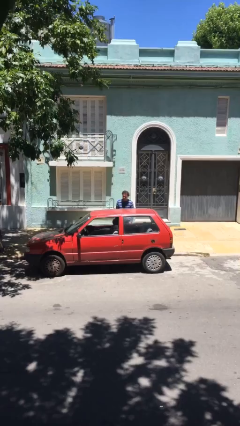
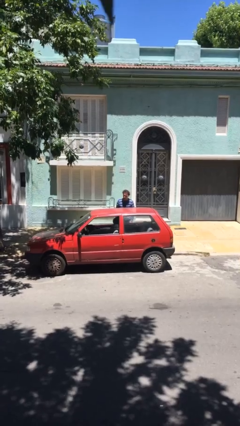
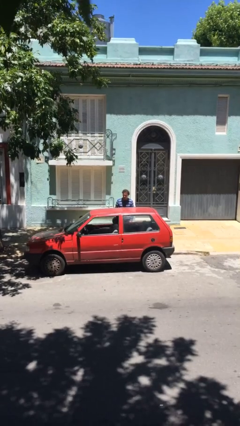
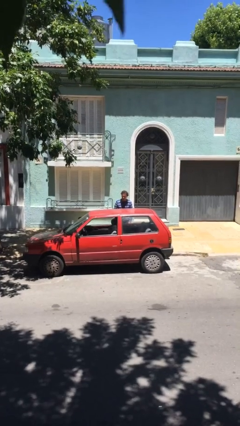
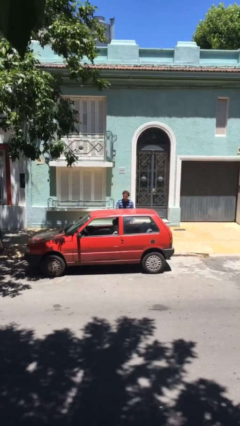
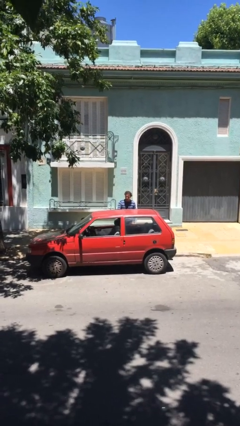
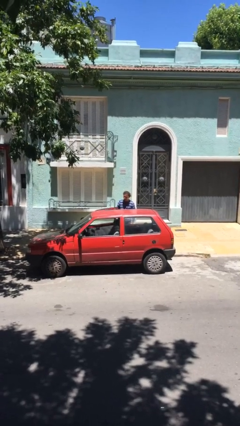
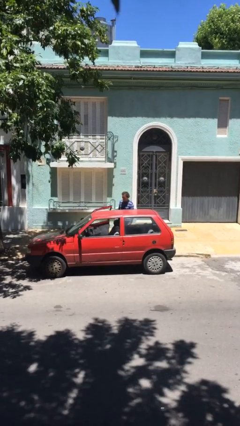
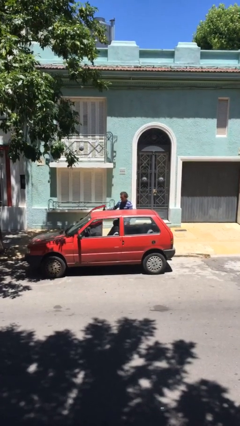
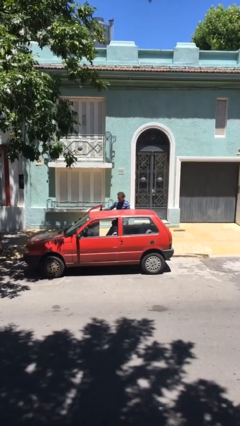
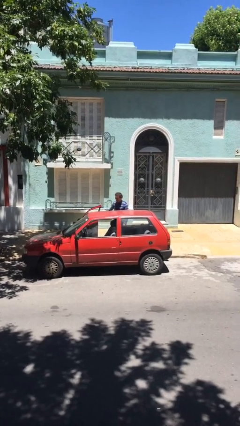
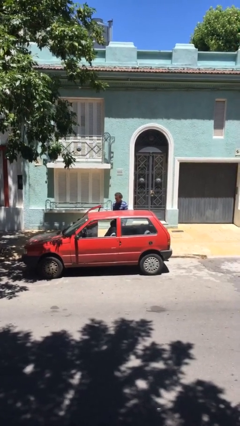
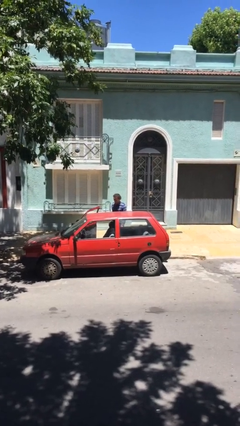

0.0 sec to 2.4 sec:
person opens car door

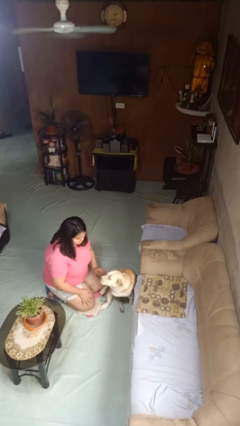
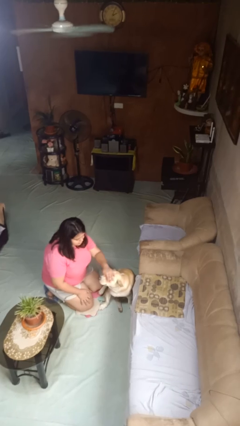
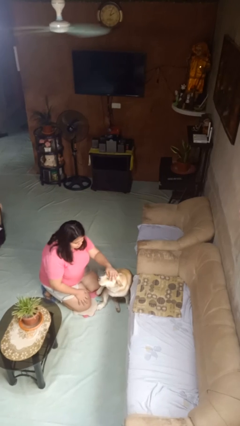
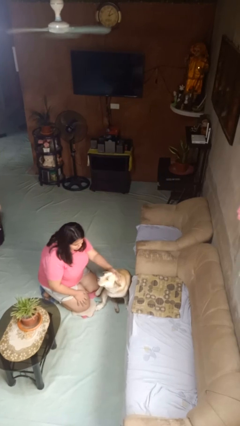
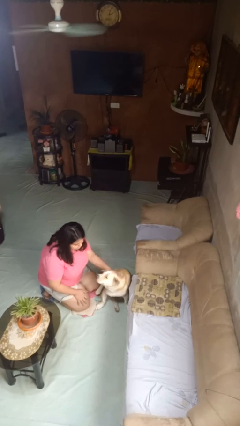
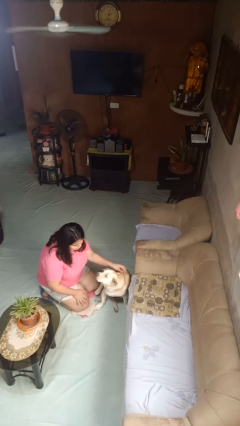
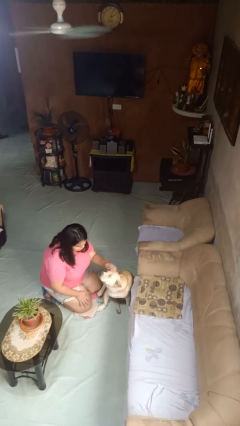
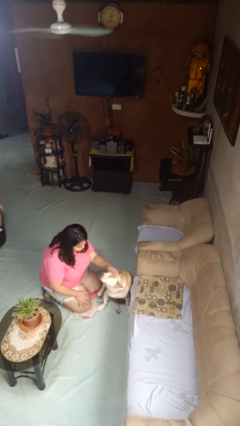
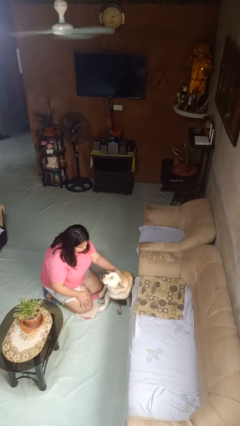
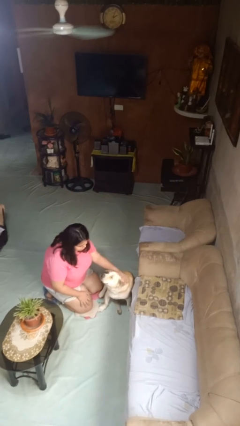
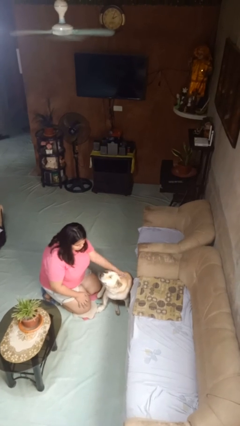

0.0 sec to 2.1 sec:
person pets dog

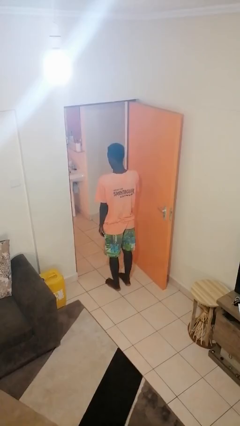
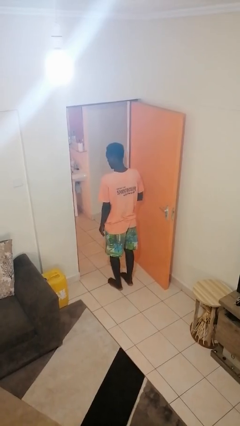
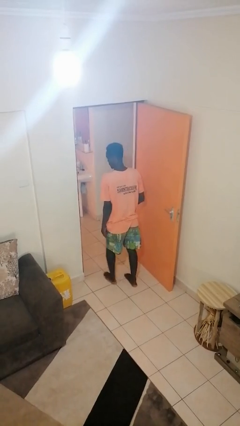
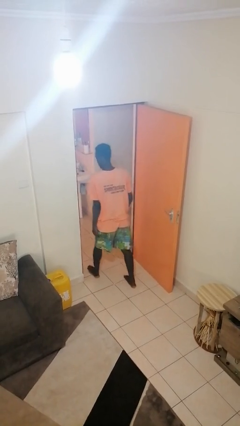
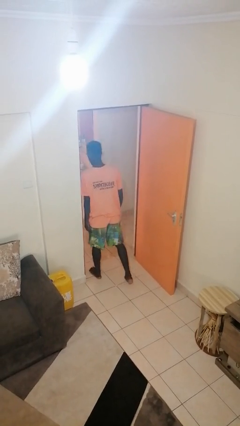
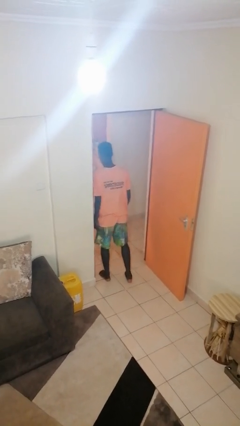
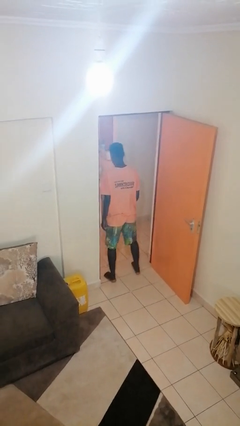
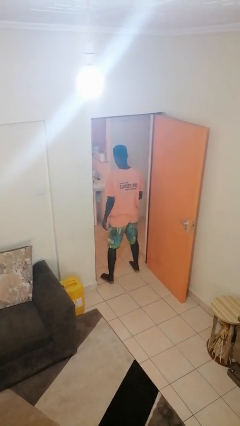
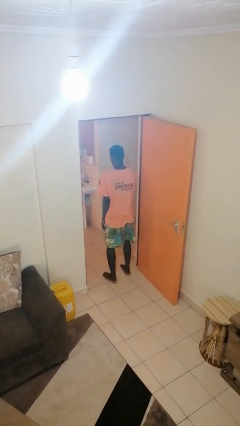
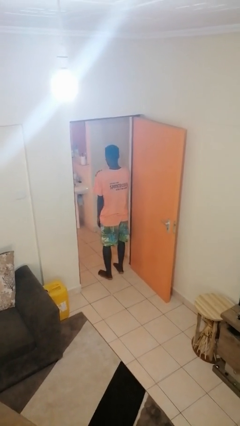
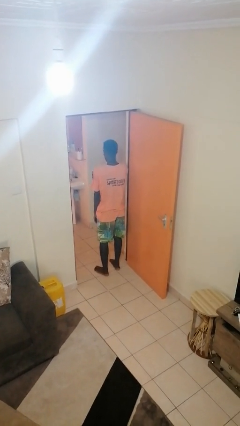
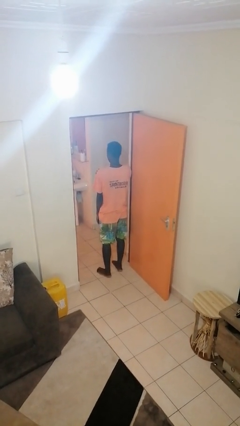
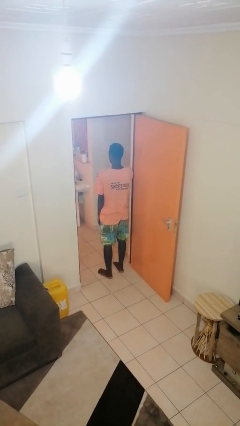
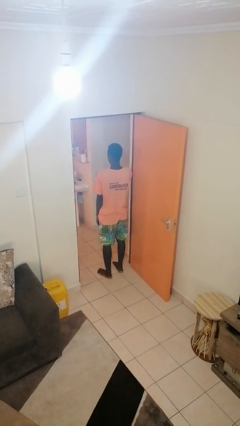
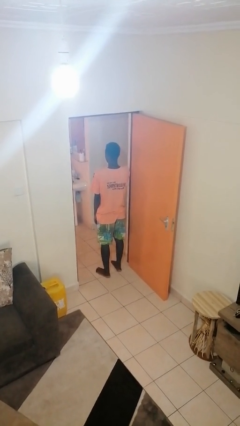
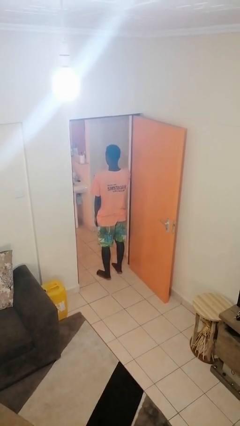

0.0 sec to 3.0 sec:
person bumps into wall

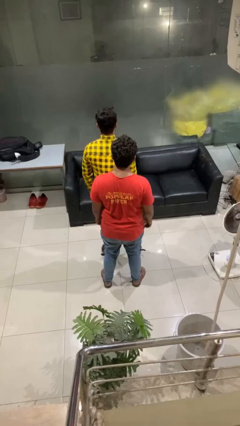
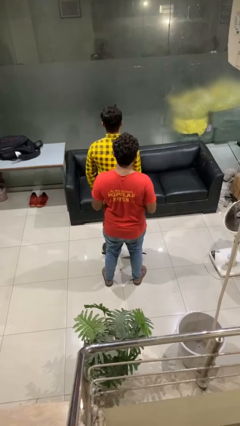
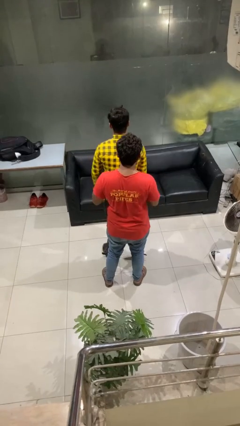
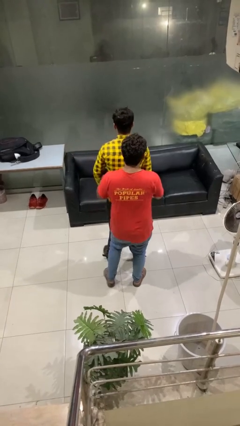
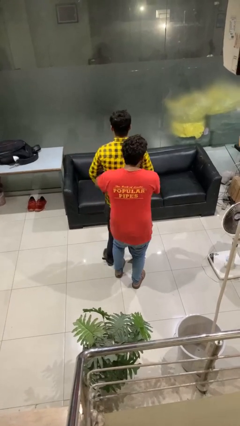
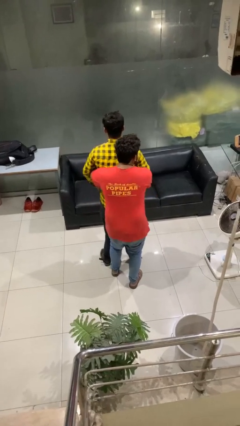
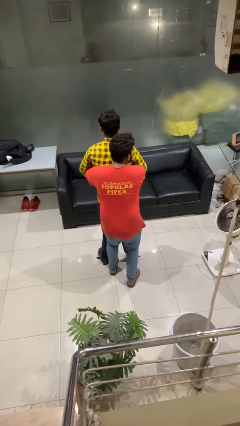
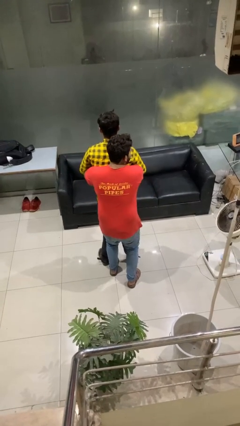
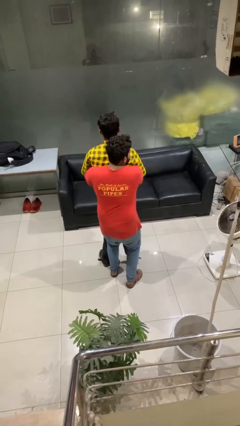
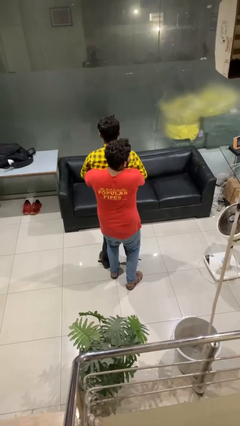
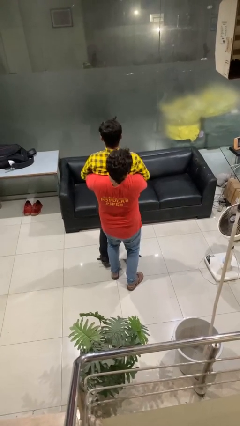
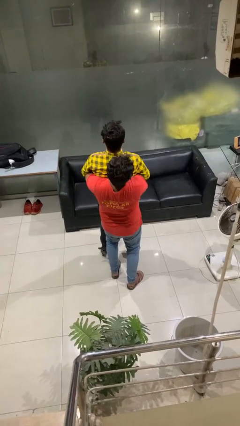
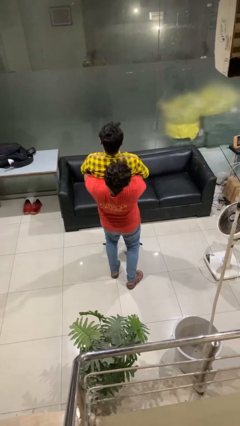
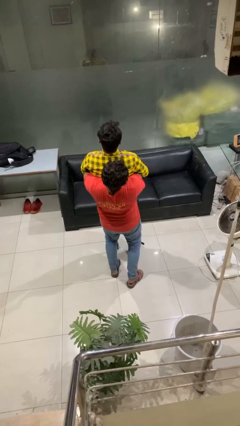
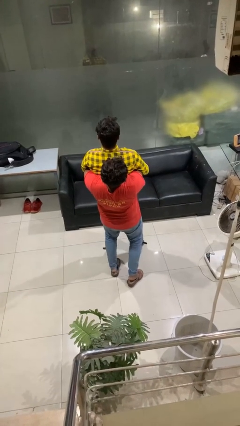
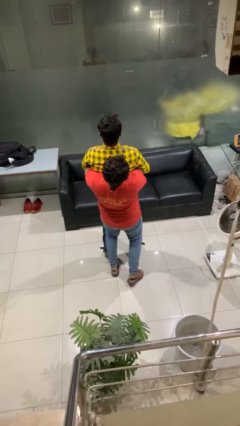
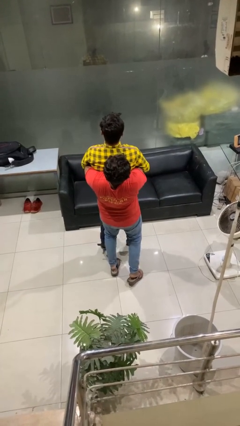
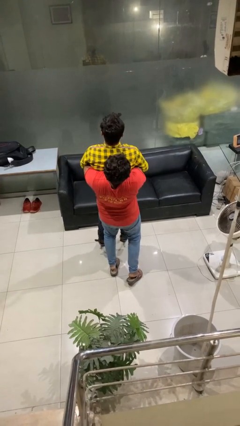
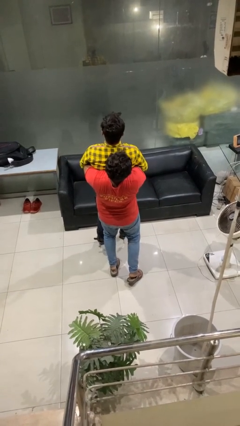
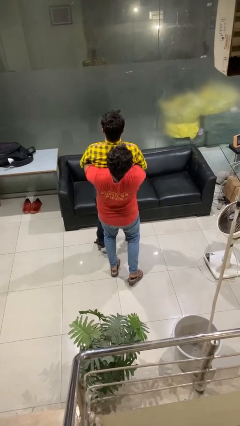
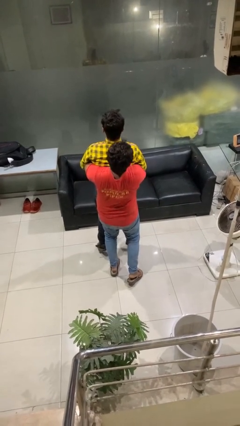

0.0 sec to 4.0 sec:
person picks up person

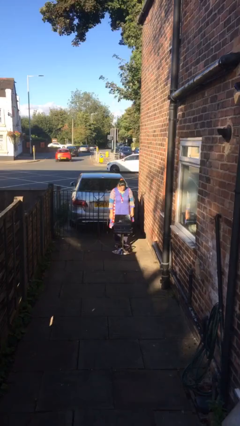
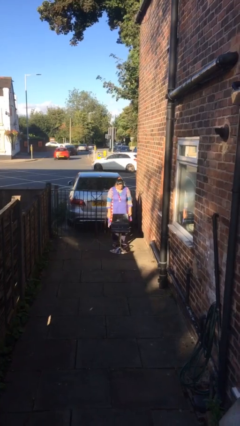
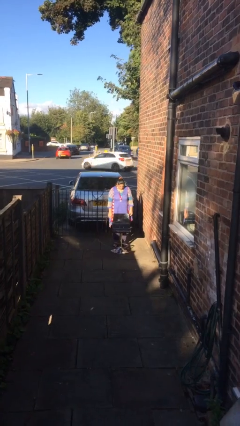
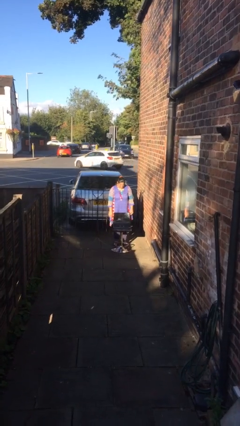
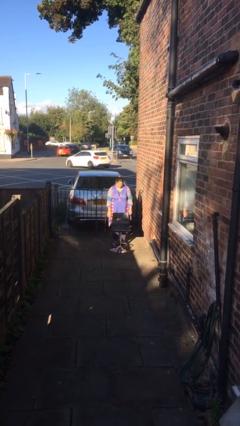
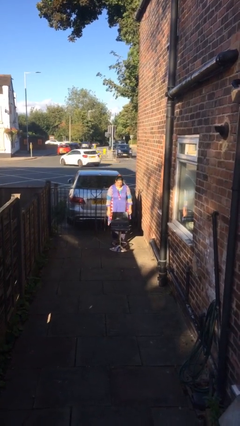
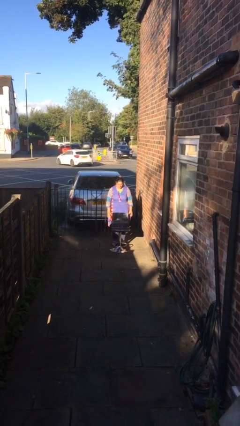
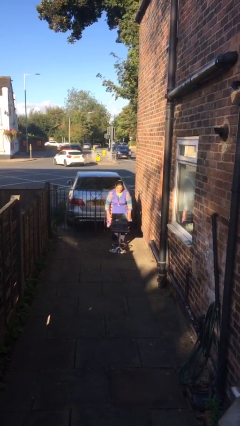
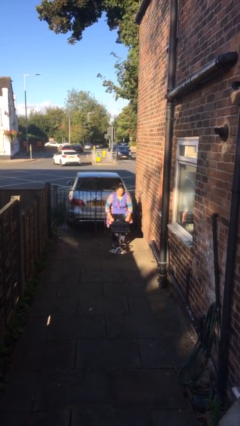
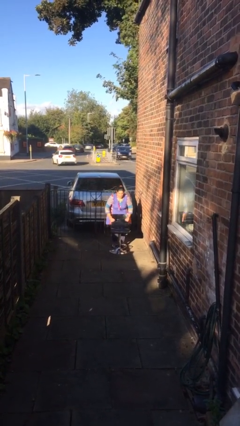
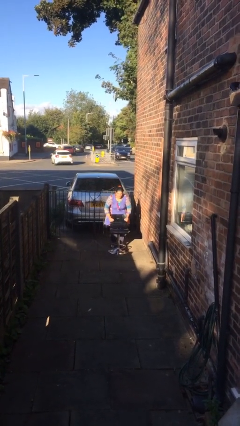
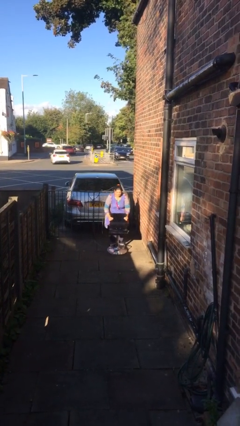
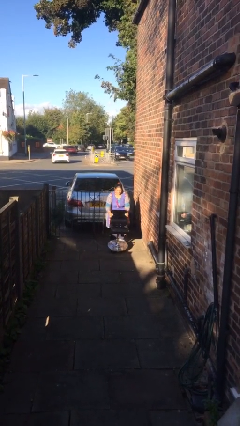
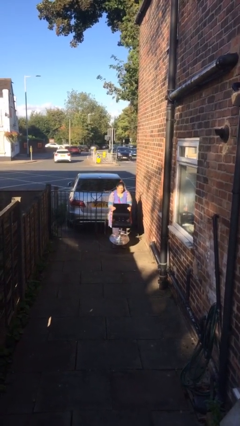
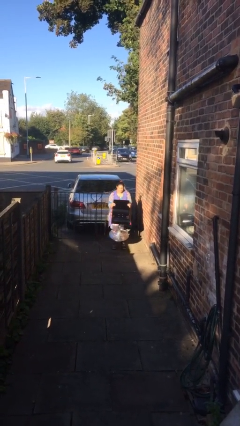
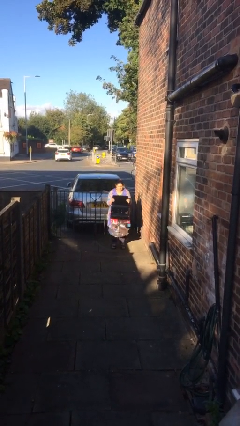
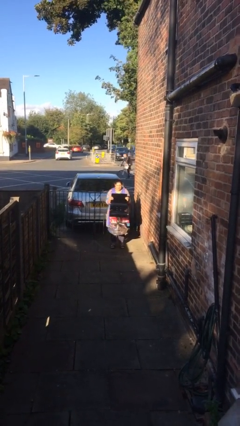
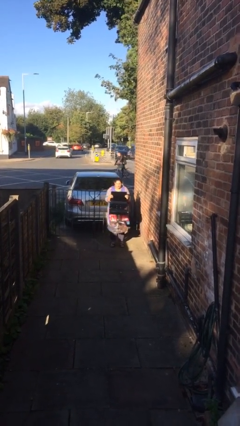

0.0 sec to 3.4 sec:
person picks up object from floor

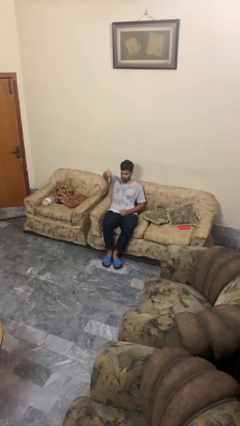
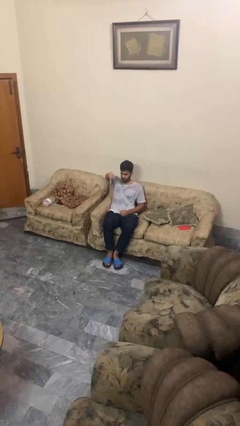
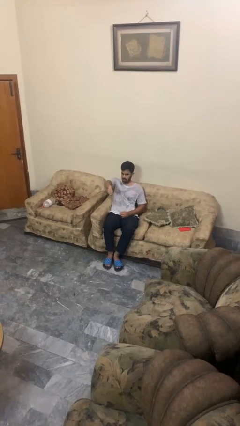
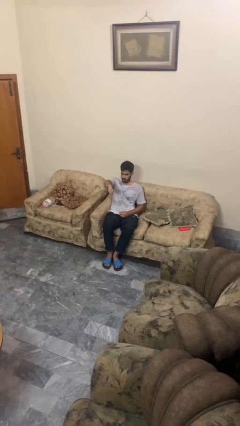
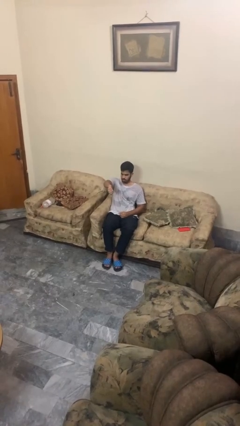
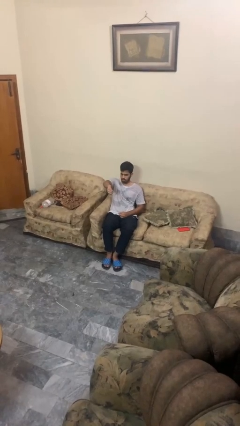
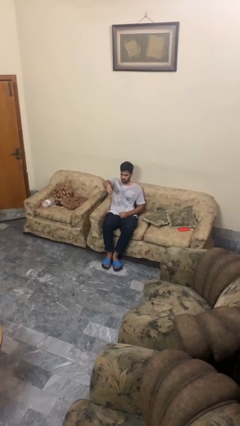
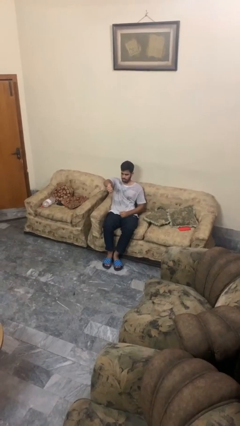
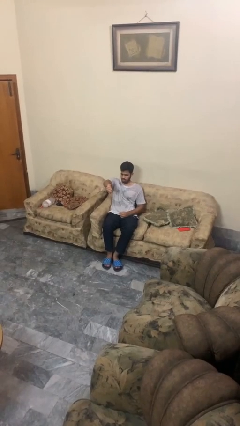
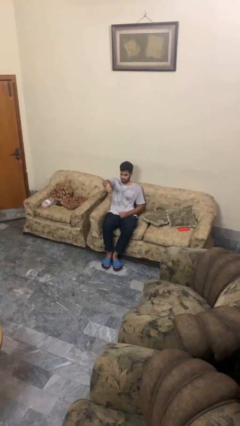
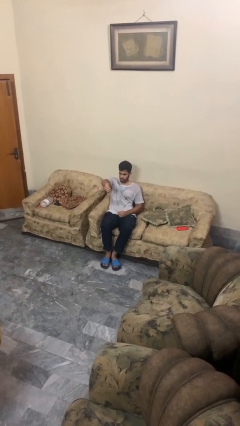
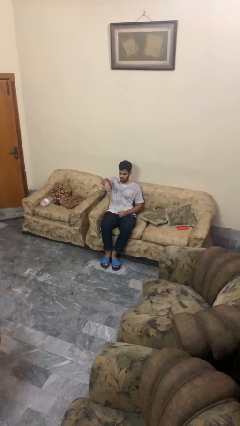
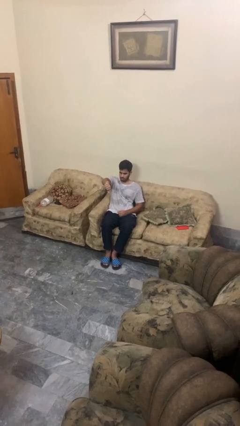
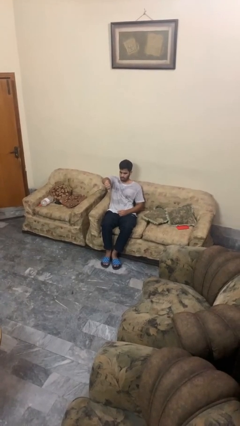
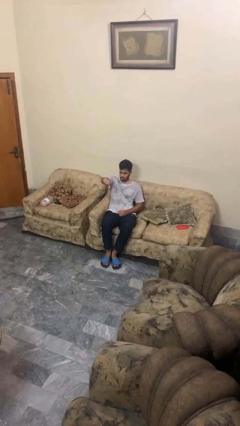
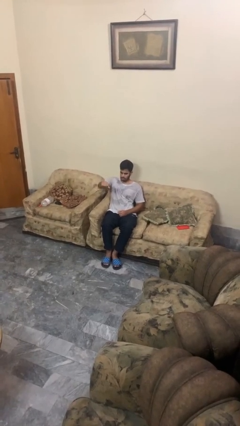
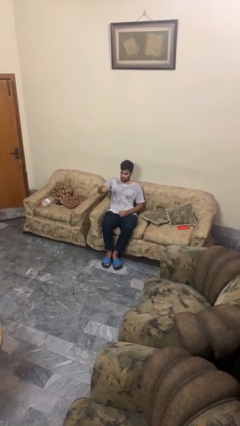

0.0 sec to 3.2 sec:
person gestures thumbs down
